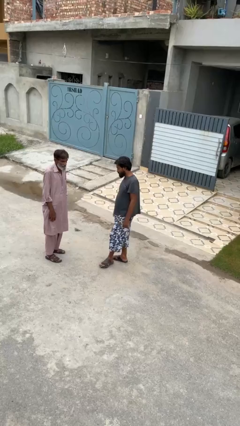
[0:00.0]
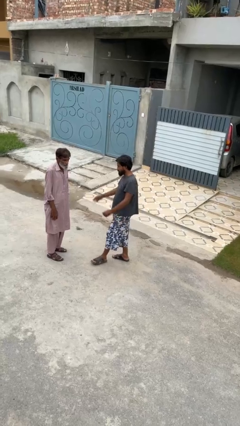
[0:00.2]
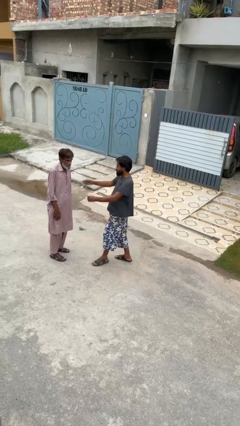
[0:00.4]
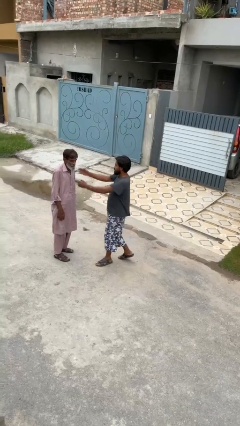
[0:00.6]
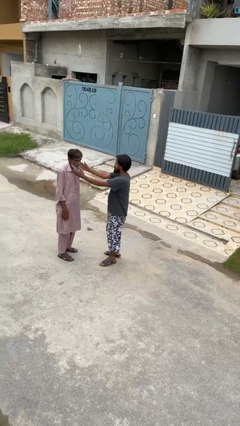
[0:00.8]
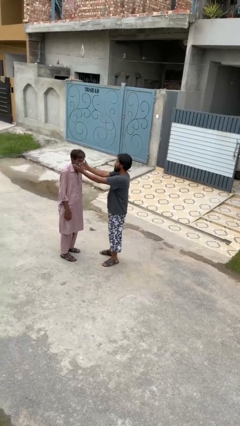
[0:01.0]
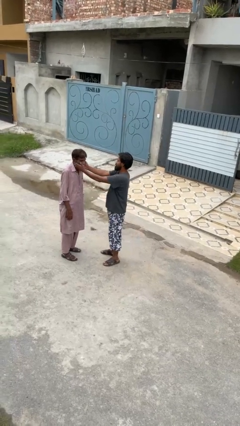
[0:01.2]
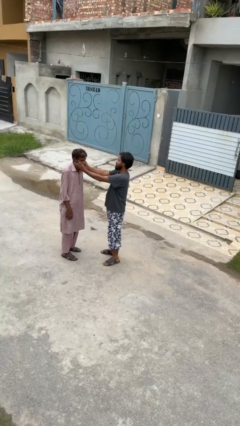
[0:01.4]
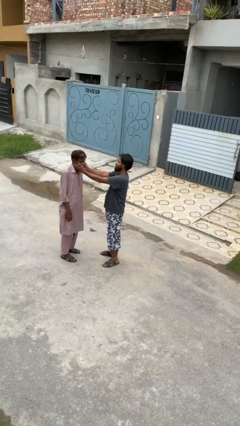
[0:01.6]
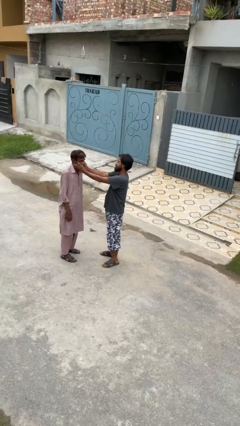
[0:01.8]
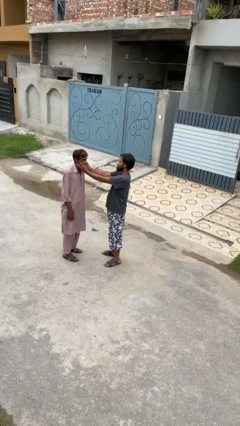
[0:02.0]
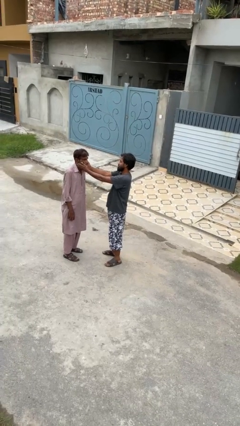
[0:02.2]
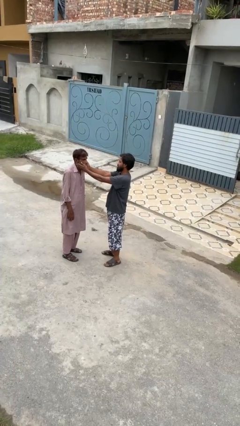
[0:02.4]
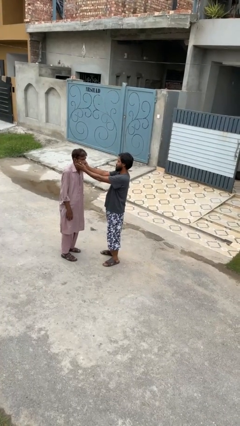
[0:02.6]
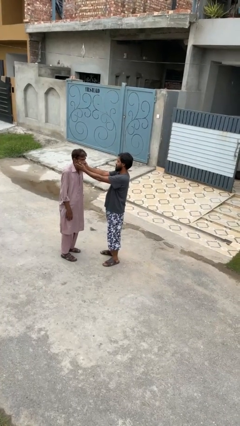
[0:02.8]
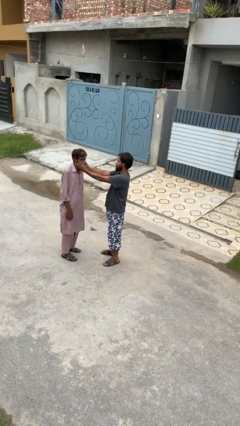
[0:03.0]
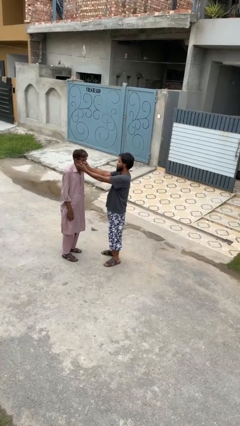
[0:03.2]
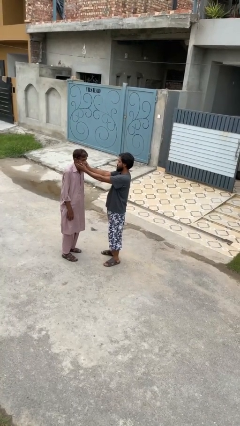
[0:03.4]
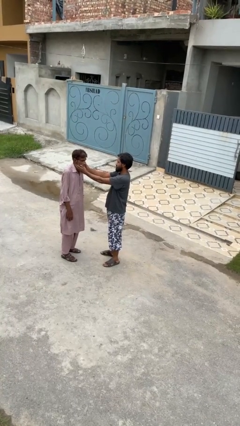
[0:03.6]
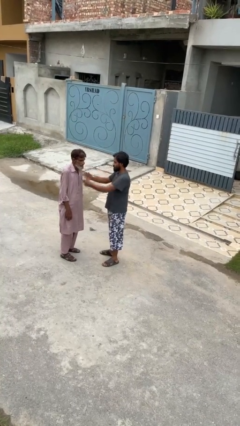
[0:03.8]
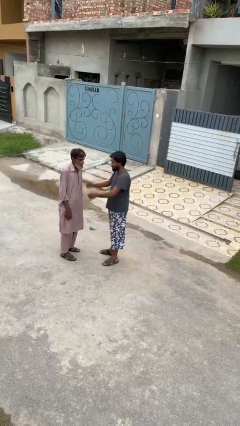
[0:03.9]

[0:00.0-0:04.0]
person touches face of person

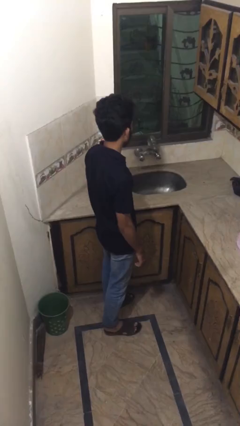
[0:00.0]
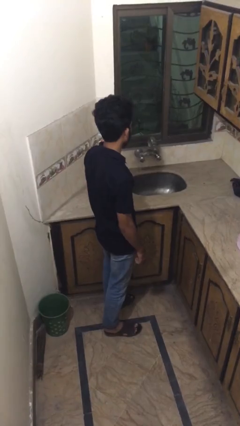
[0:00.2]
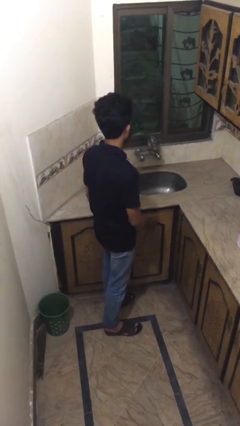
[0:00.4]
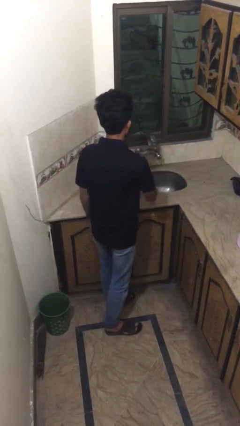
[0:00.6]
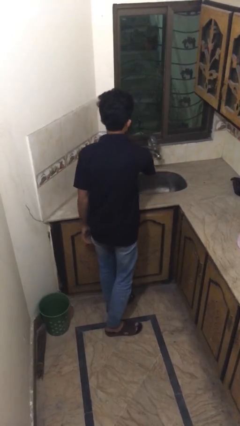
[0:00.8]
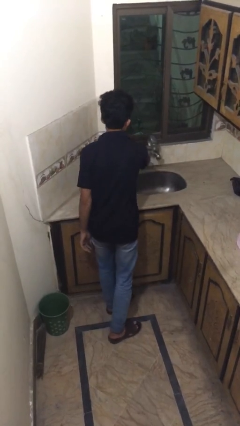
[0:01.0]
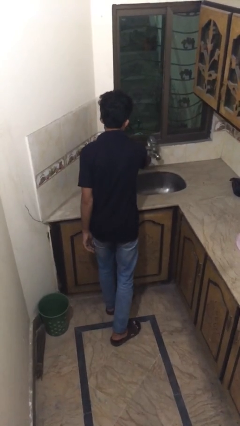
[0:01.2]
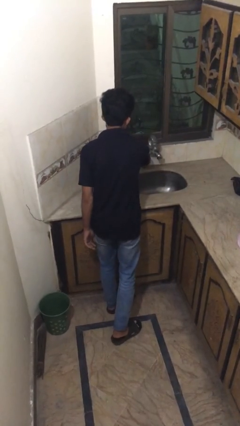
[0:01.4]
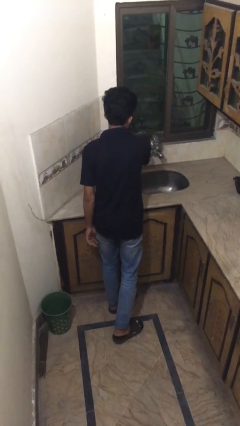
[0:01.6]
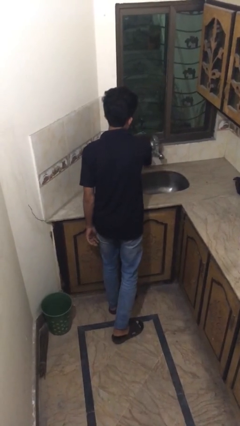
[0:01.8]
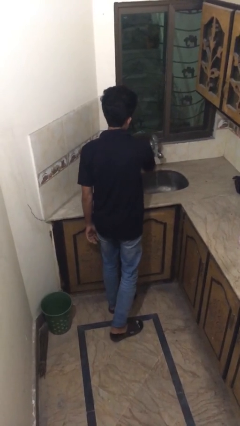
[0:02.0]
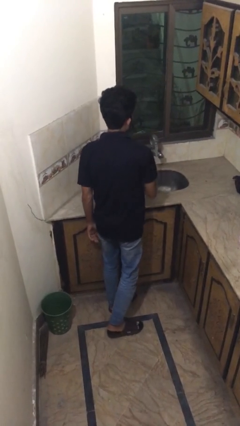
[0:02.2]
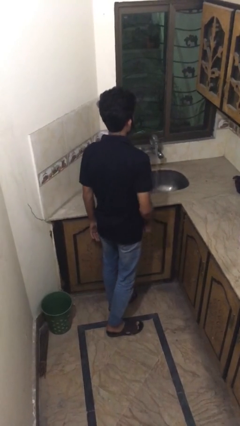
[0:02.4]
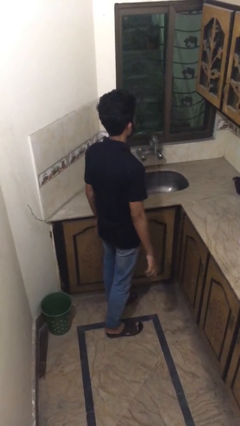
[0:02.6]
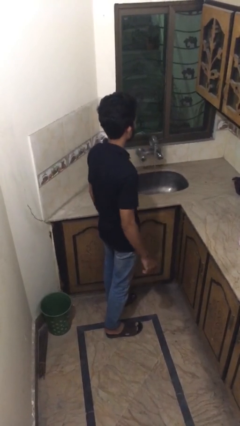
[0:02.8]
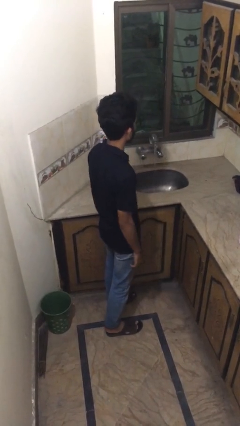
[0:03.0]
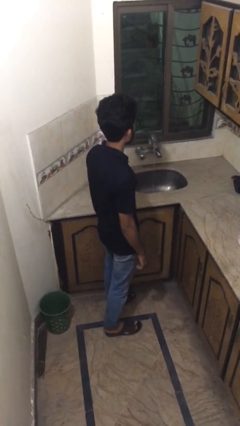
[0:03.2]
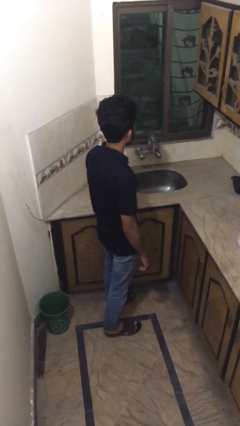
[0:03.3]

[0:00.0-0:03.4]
person turns on faucet

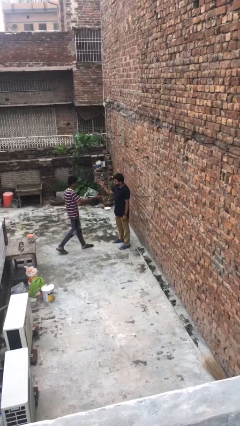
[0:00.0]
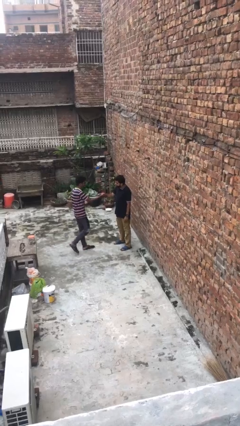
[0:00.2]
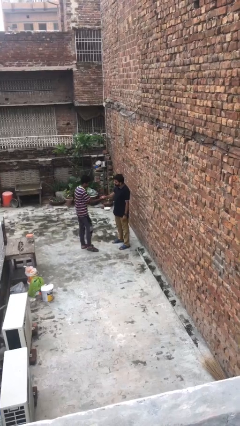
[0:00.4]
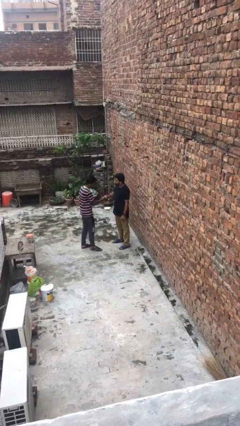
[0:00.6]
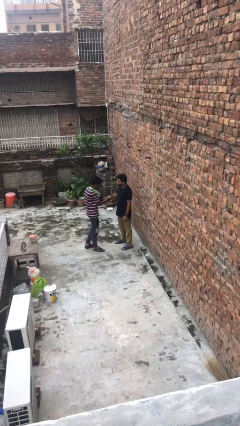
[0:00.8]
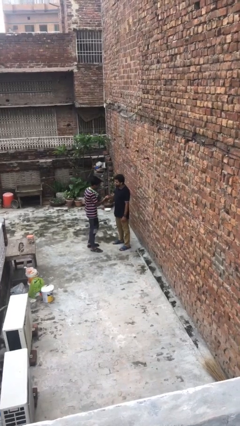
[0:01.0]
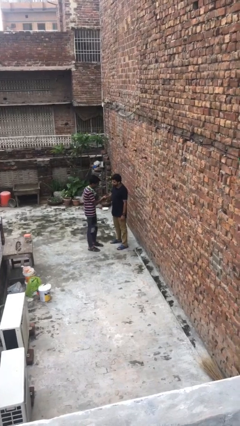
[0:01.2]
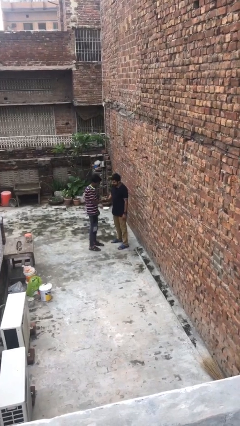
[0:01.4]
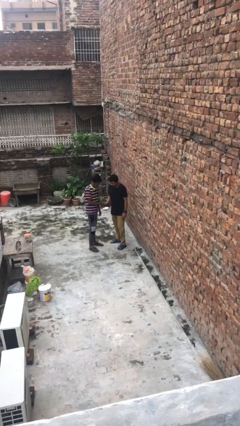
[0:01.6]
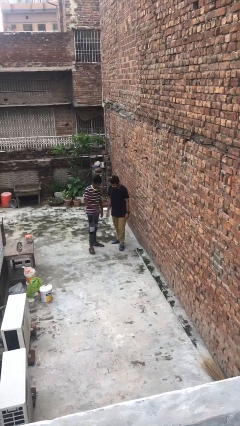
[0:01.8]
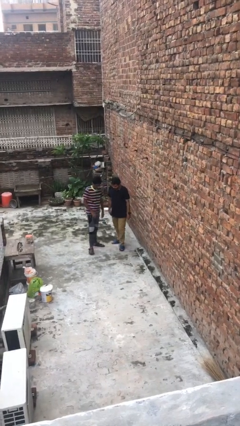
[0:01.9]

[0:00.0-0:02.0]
person shakes hand

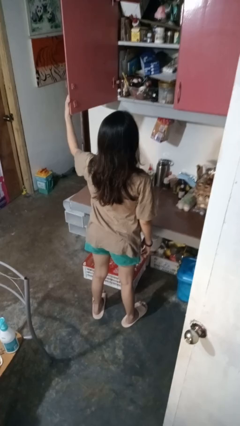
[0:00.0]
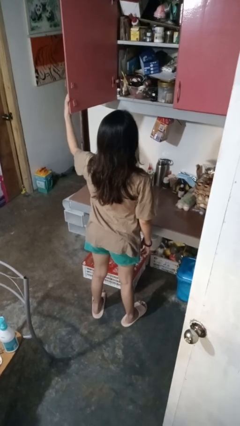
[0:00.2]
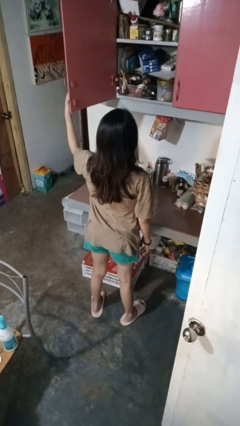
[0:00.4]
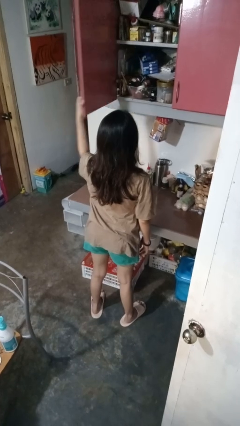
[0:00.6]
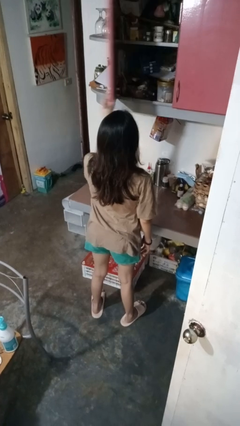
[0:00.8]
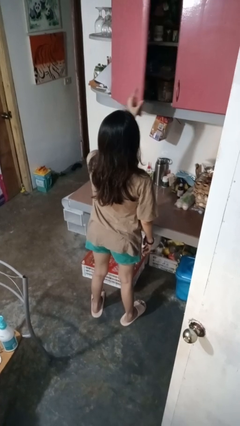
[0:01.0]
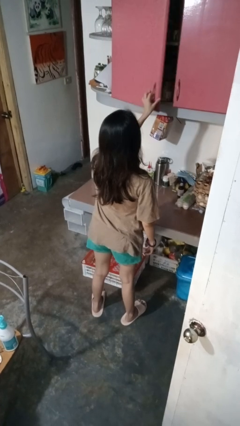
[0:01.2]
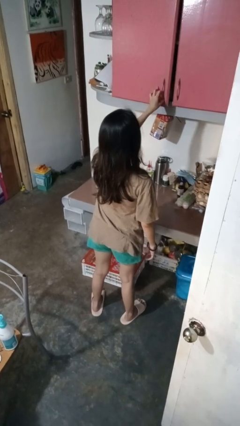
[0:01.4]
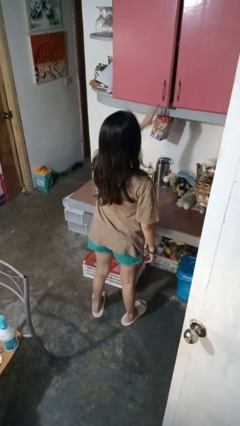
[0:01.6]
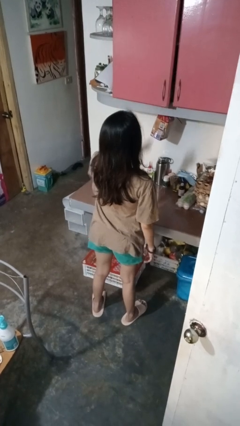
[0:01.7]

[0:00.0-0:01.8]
person closes cabinet

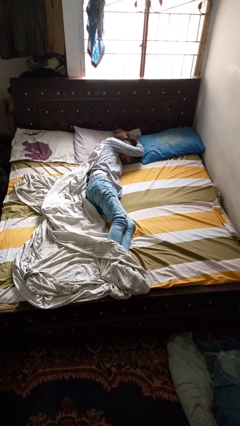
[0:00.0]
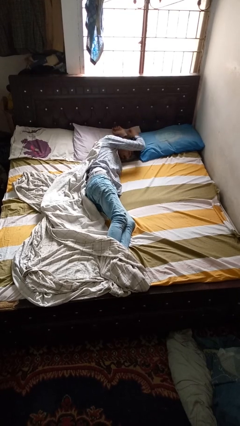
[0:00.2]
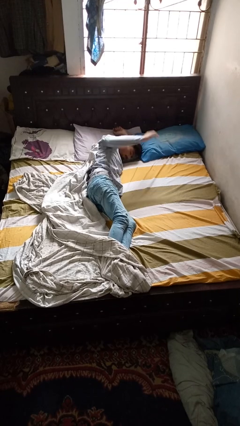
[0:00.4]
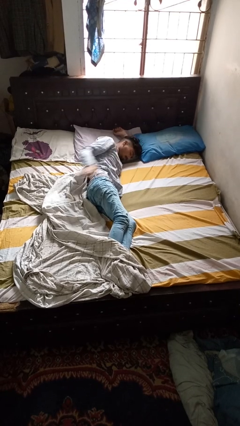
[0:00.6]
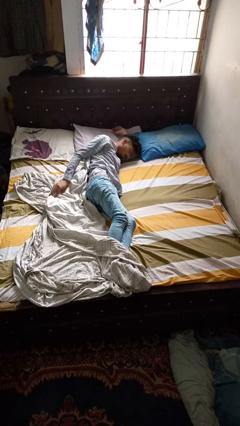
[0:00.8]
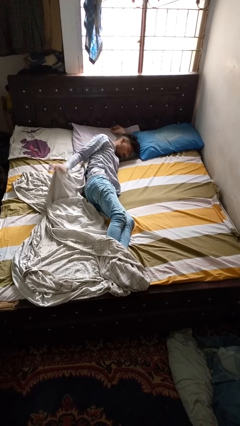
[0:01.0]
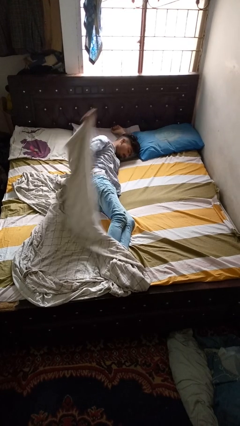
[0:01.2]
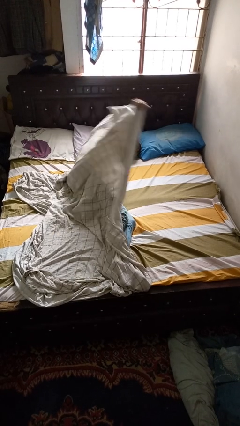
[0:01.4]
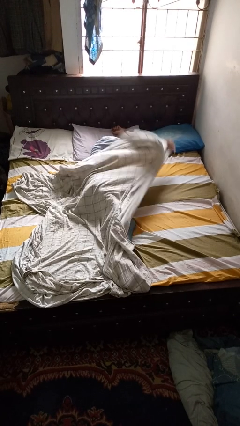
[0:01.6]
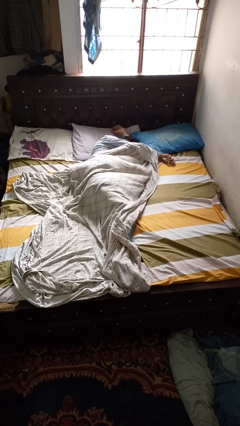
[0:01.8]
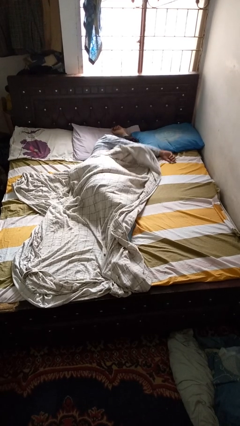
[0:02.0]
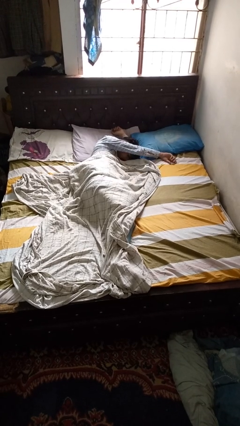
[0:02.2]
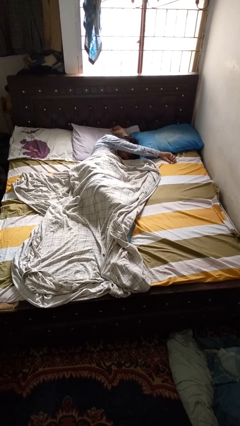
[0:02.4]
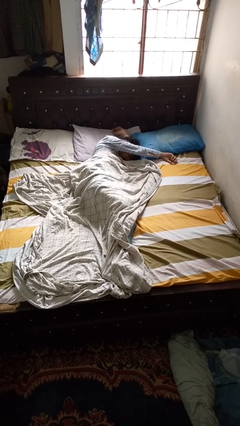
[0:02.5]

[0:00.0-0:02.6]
person covers with bedsheets

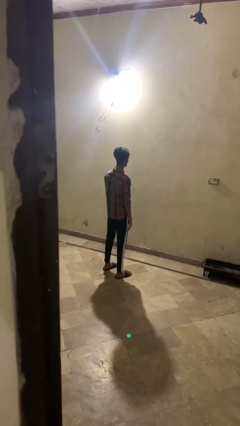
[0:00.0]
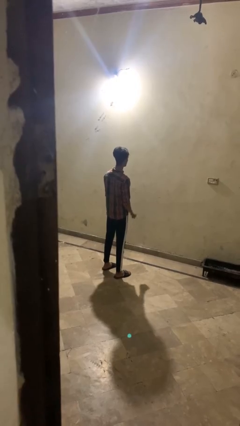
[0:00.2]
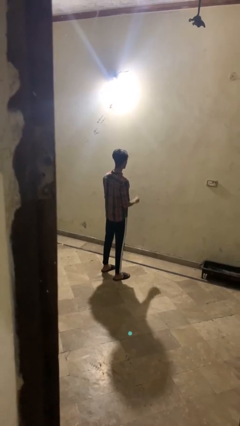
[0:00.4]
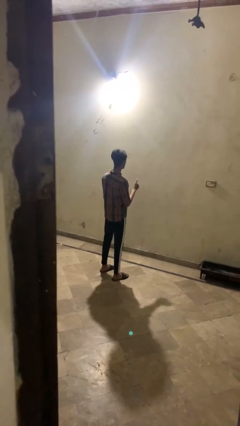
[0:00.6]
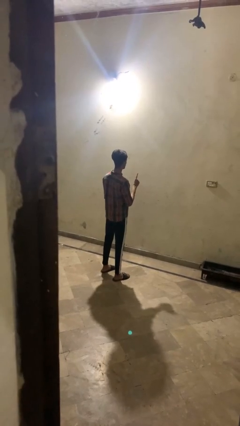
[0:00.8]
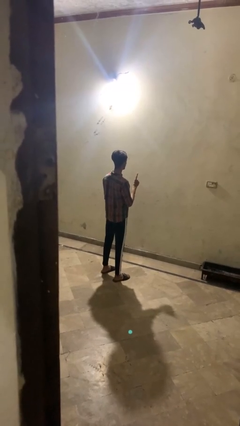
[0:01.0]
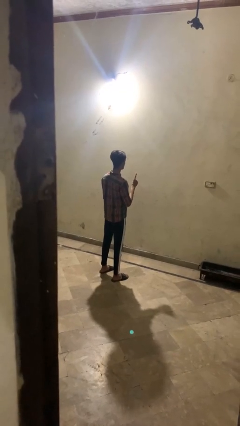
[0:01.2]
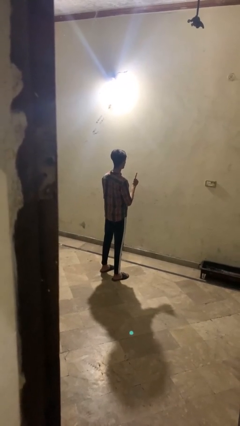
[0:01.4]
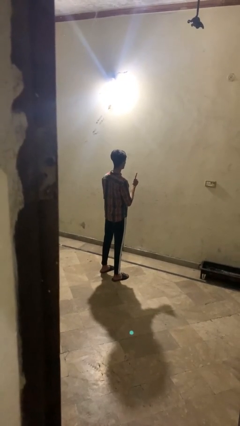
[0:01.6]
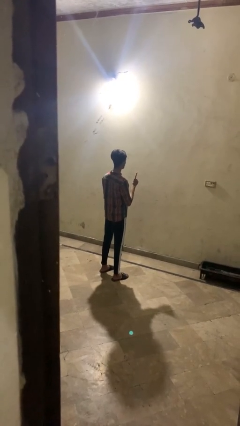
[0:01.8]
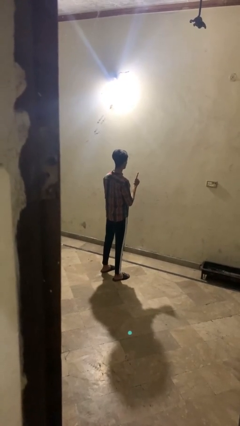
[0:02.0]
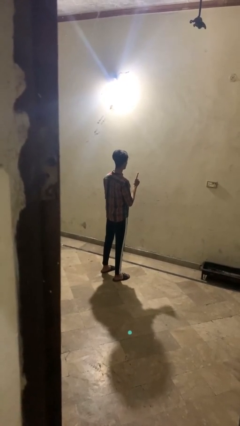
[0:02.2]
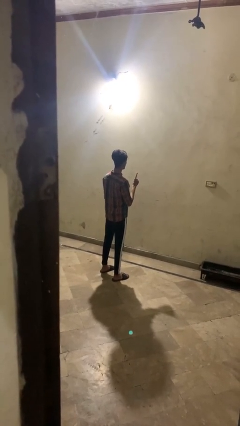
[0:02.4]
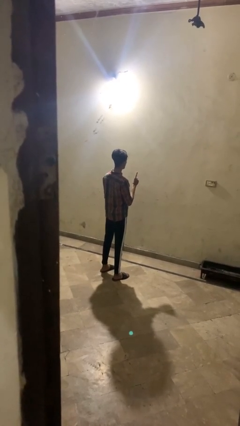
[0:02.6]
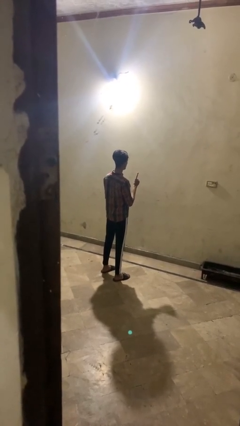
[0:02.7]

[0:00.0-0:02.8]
person gestures number one

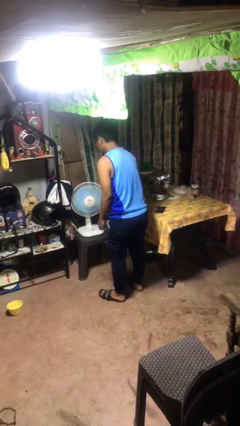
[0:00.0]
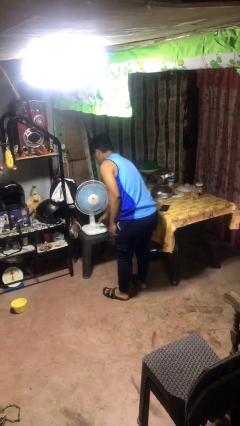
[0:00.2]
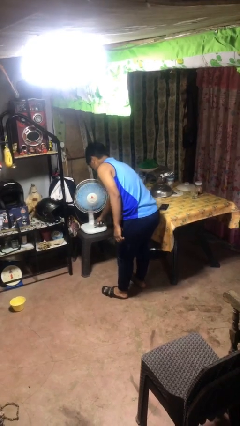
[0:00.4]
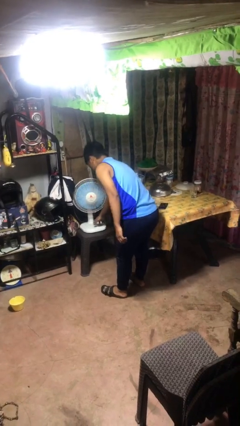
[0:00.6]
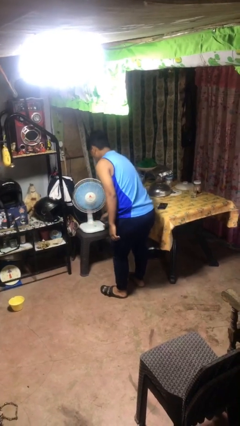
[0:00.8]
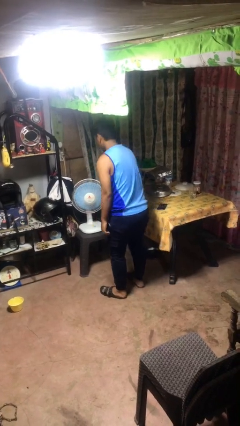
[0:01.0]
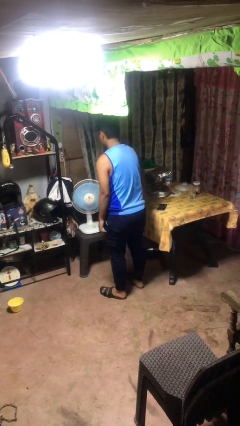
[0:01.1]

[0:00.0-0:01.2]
person turns on fan
